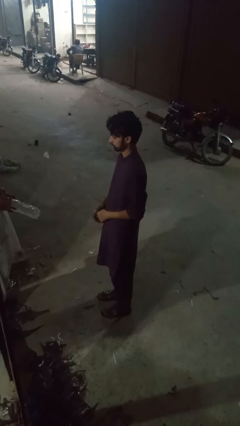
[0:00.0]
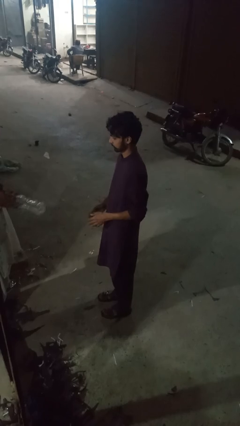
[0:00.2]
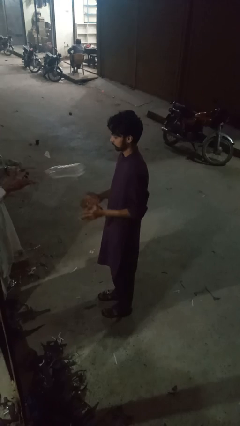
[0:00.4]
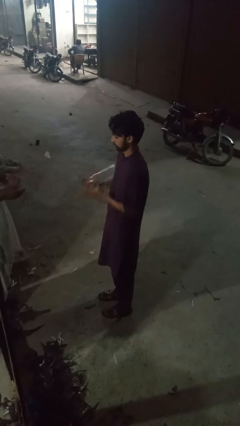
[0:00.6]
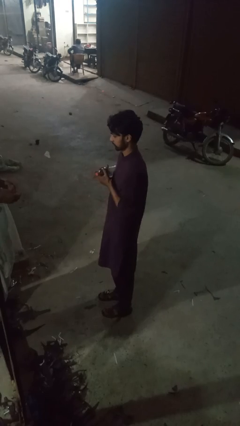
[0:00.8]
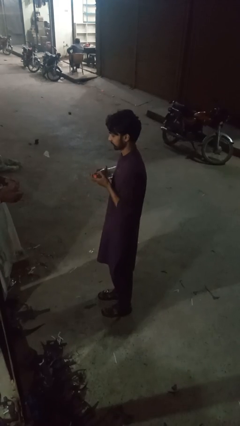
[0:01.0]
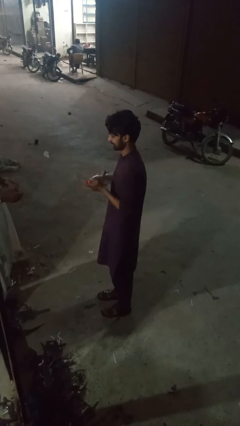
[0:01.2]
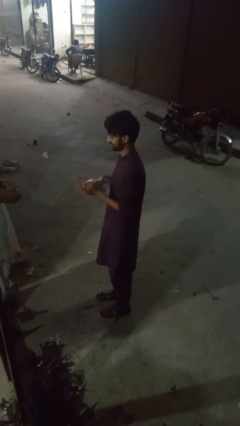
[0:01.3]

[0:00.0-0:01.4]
person catches object from person

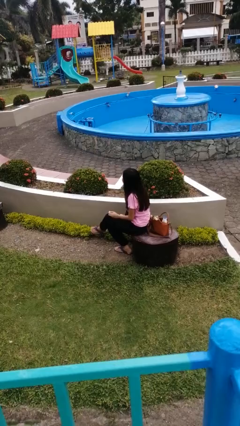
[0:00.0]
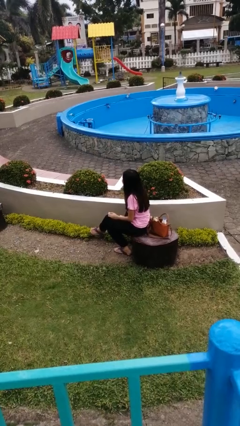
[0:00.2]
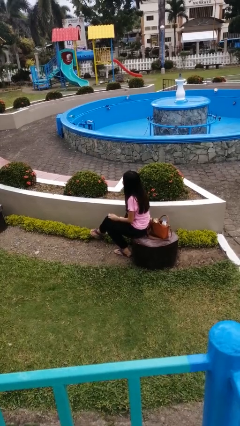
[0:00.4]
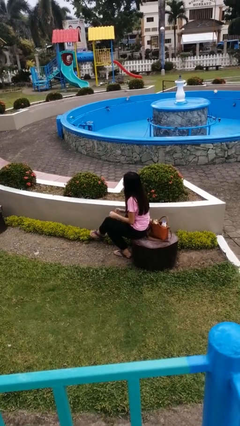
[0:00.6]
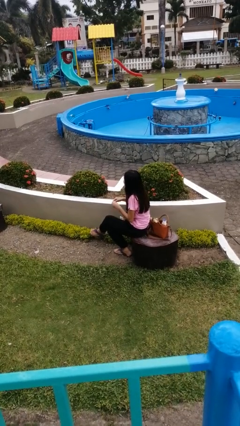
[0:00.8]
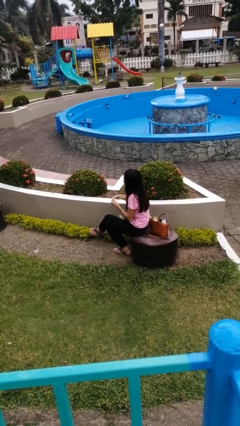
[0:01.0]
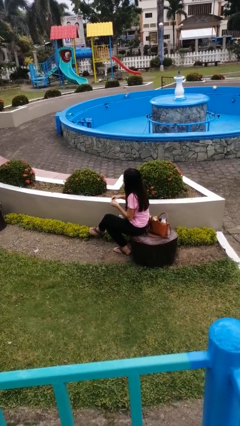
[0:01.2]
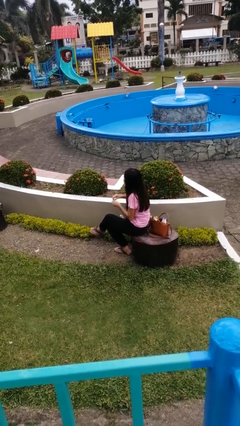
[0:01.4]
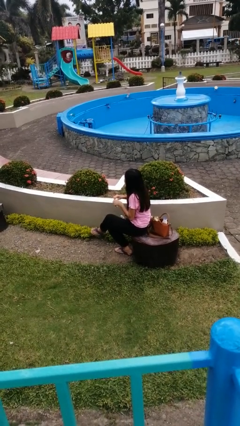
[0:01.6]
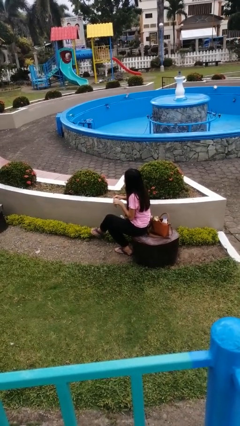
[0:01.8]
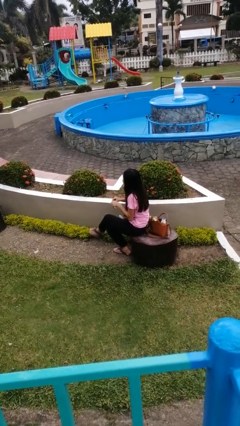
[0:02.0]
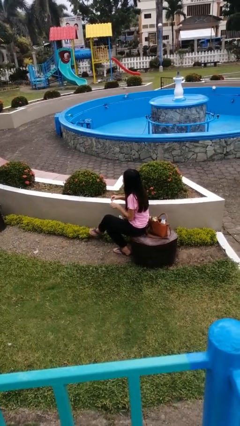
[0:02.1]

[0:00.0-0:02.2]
person takes medicine pills

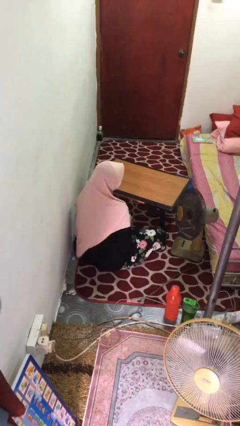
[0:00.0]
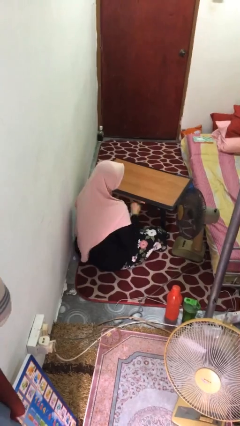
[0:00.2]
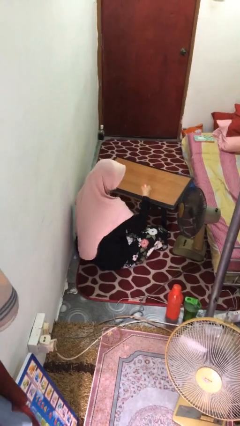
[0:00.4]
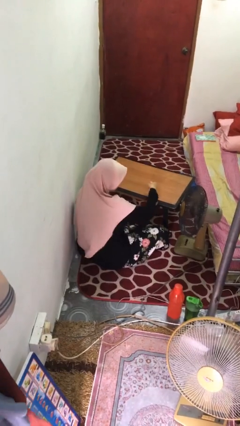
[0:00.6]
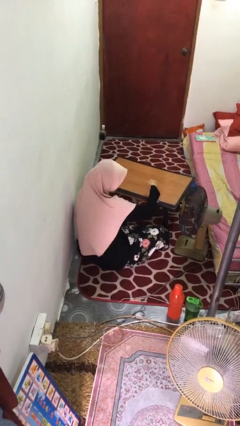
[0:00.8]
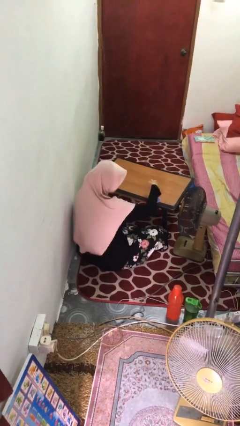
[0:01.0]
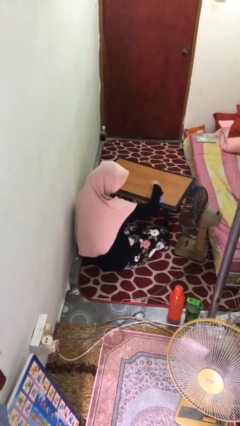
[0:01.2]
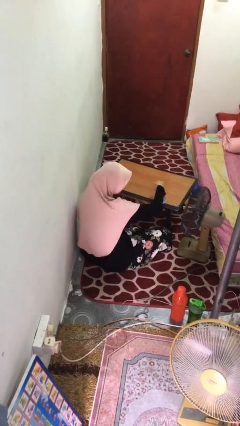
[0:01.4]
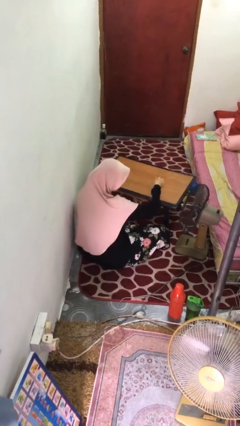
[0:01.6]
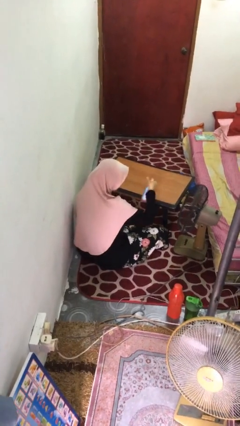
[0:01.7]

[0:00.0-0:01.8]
person sprays from bottle

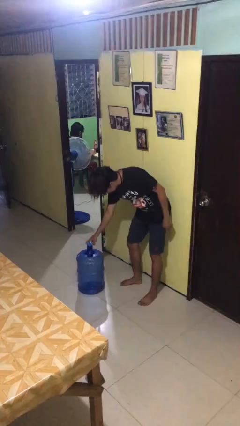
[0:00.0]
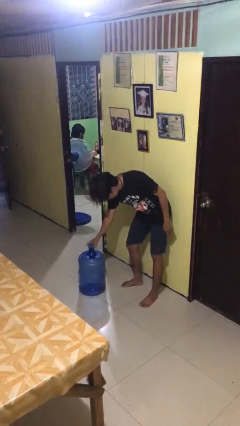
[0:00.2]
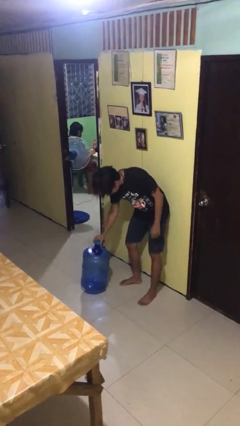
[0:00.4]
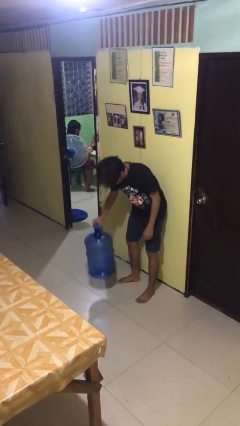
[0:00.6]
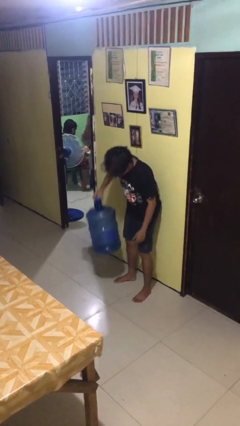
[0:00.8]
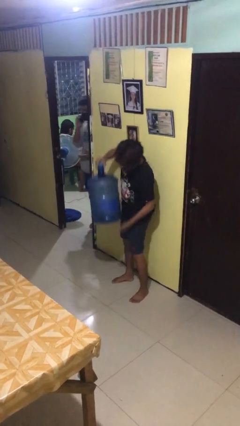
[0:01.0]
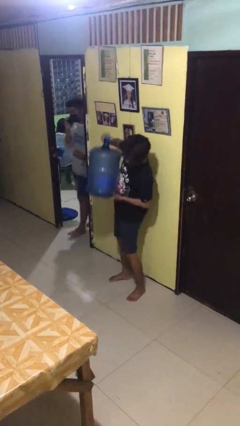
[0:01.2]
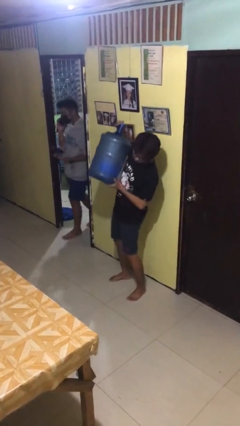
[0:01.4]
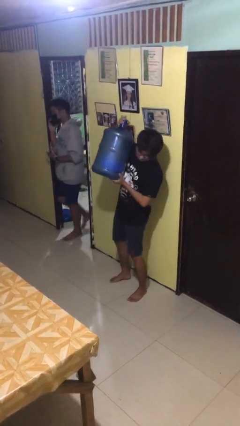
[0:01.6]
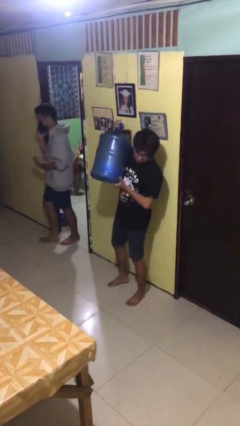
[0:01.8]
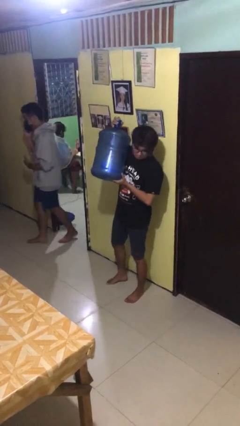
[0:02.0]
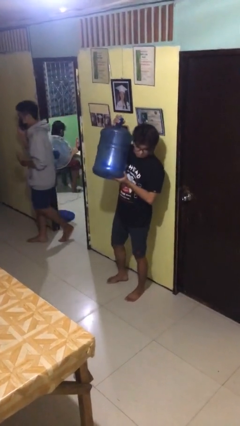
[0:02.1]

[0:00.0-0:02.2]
person picks up object from floor

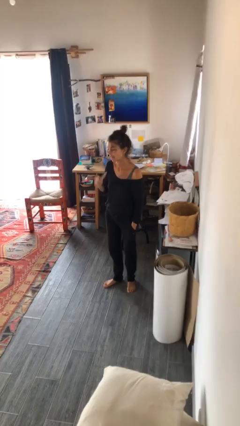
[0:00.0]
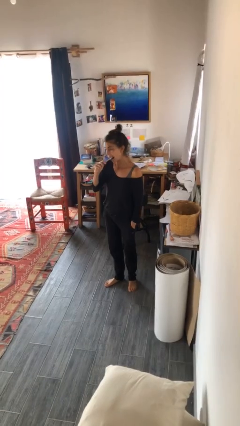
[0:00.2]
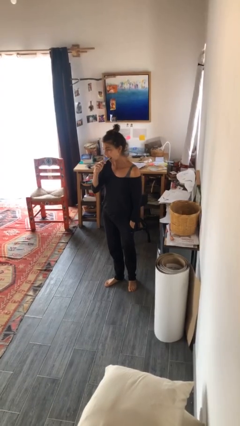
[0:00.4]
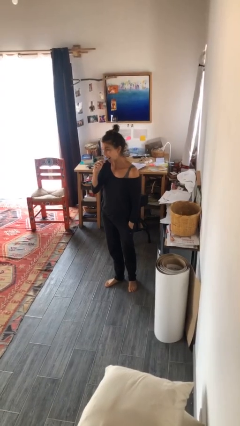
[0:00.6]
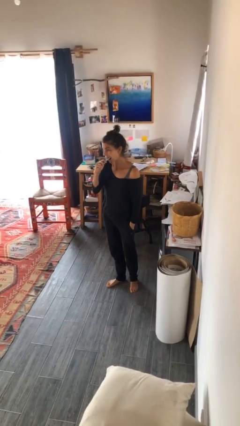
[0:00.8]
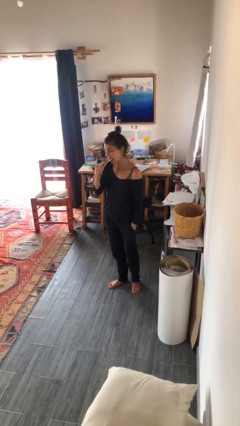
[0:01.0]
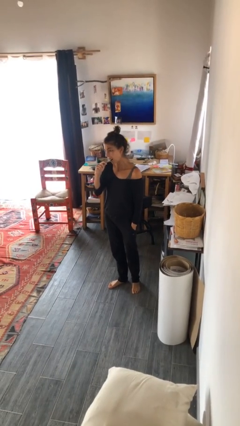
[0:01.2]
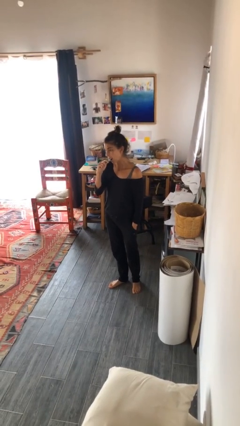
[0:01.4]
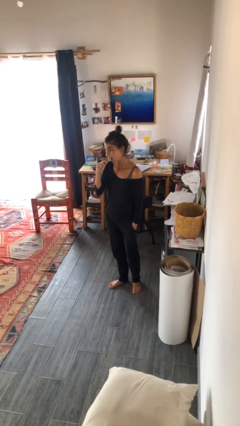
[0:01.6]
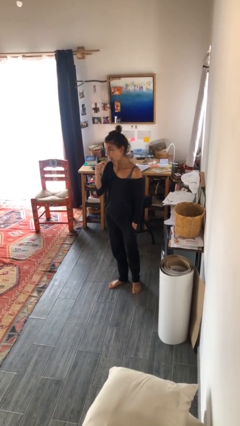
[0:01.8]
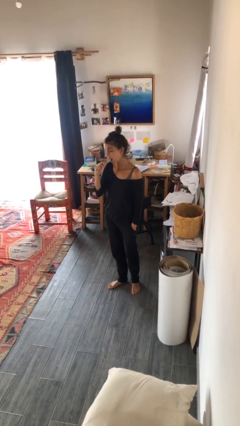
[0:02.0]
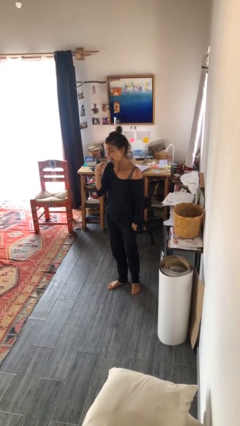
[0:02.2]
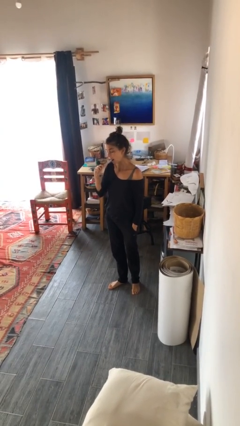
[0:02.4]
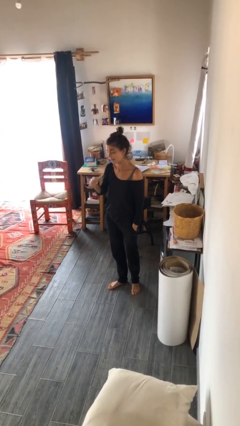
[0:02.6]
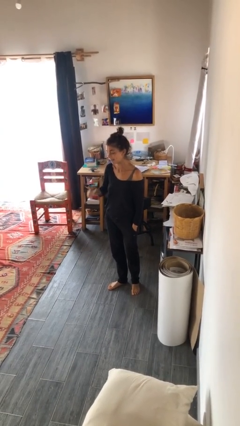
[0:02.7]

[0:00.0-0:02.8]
person brushes teeth

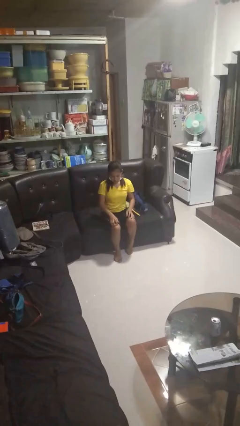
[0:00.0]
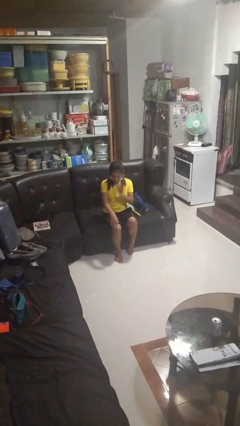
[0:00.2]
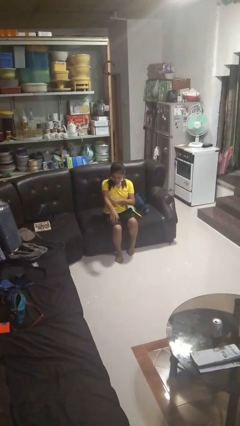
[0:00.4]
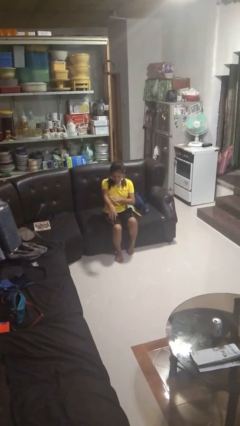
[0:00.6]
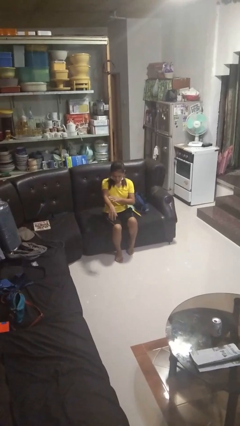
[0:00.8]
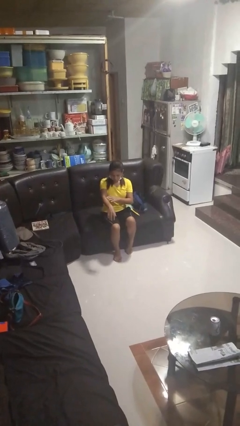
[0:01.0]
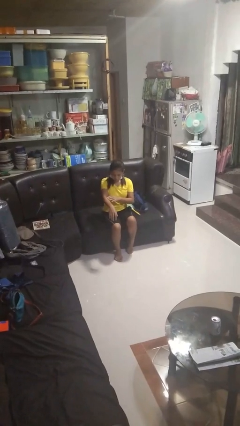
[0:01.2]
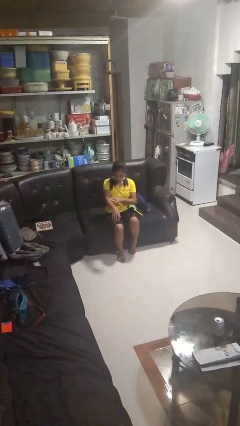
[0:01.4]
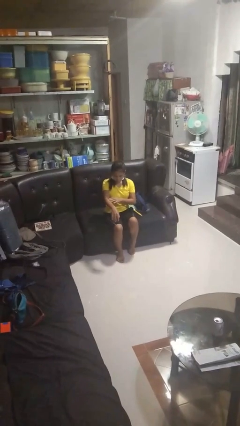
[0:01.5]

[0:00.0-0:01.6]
person swats bug

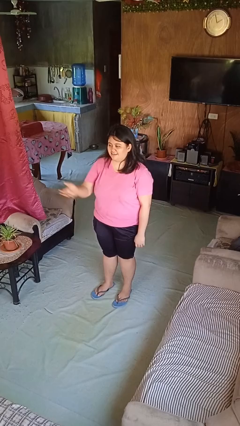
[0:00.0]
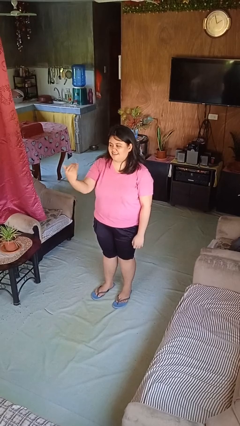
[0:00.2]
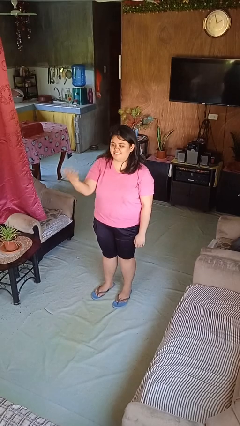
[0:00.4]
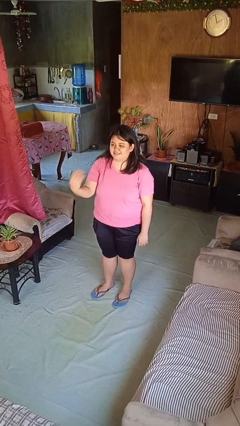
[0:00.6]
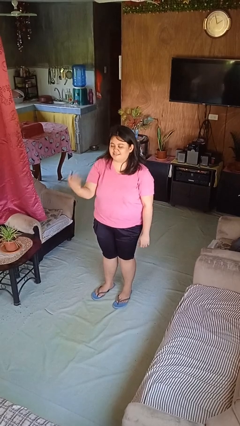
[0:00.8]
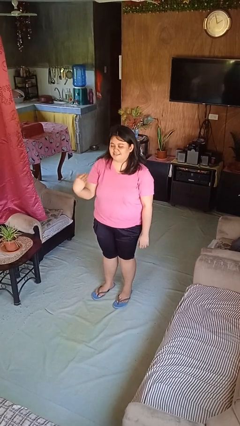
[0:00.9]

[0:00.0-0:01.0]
person gestures come here

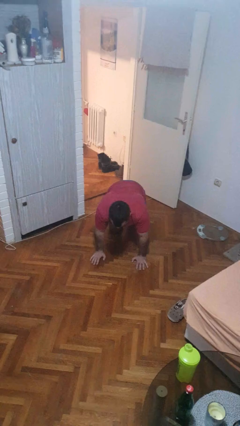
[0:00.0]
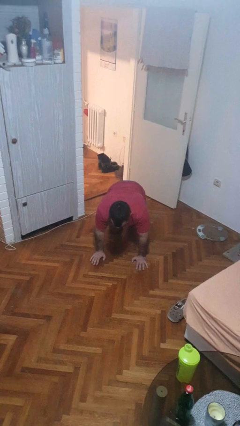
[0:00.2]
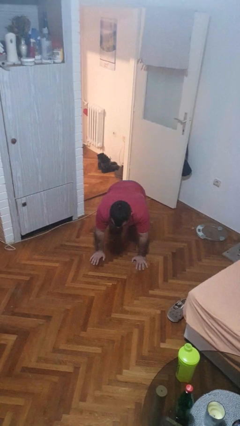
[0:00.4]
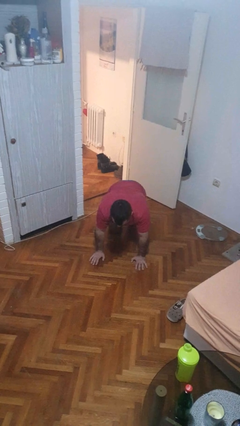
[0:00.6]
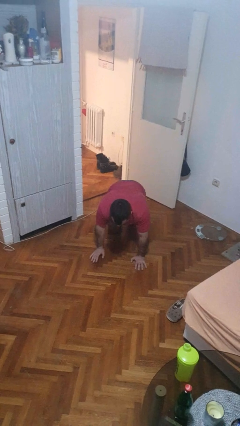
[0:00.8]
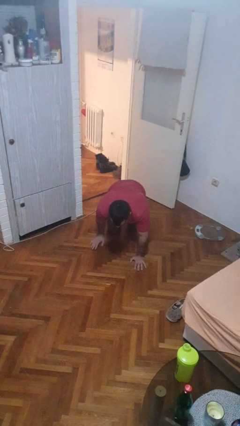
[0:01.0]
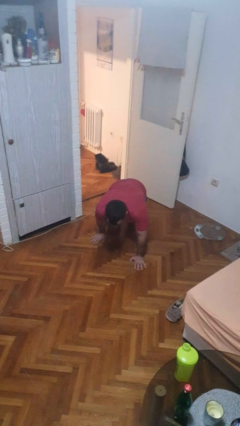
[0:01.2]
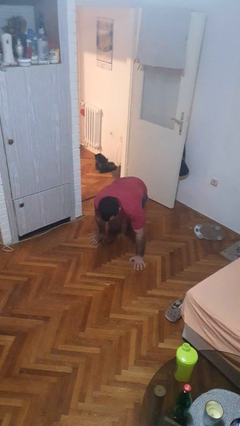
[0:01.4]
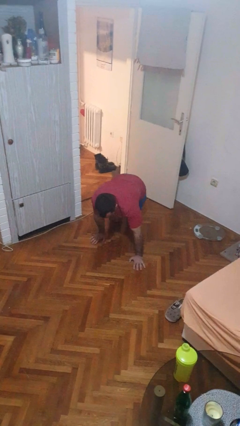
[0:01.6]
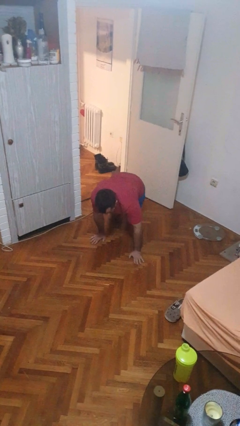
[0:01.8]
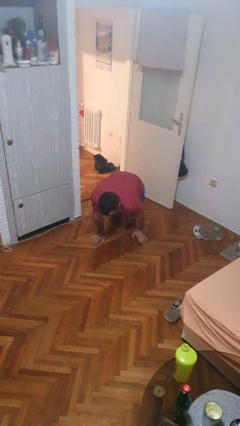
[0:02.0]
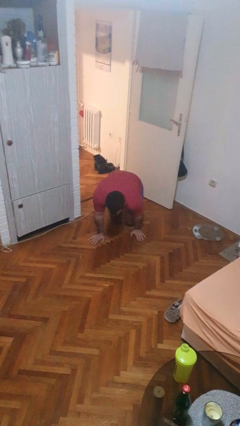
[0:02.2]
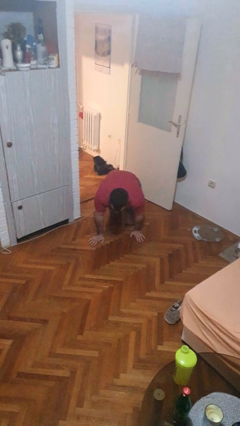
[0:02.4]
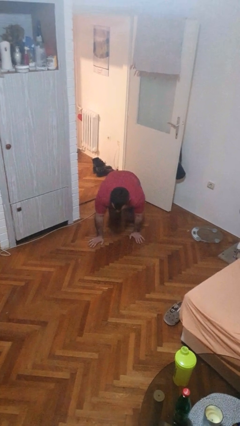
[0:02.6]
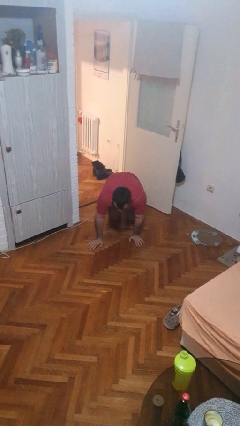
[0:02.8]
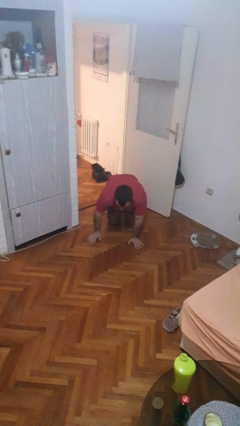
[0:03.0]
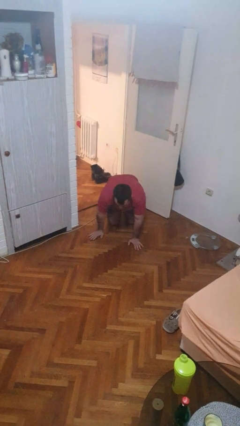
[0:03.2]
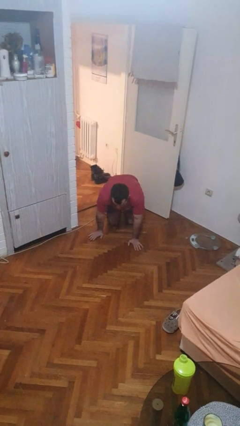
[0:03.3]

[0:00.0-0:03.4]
person crawls

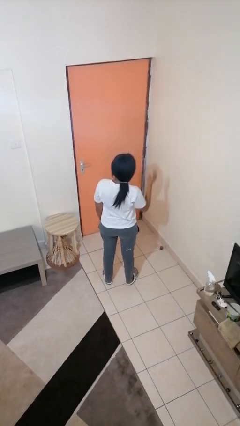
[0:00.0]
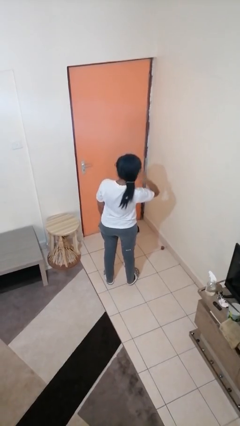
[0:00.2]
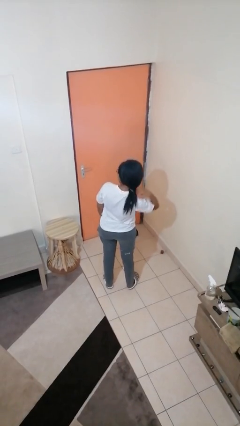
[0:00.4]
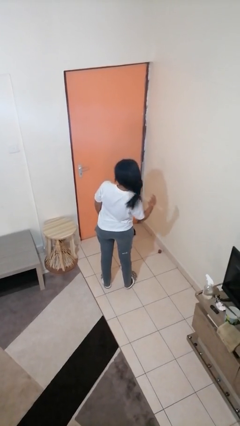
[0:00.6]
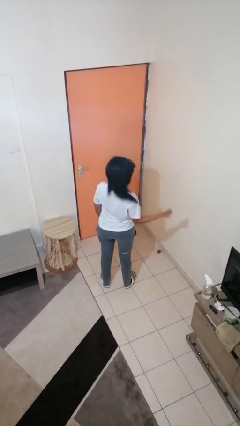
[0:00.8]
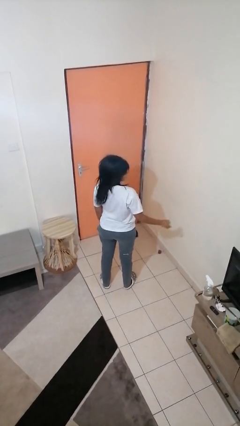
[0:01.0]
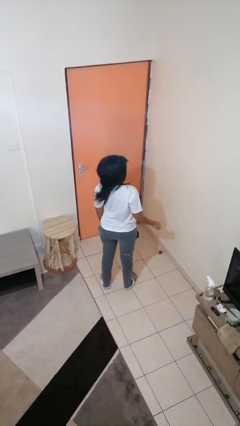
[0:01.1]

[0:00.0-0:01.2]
person takes off hairtie
